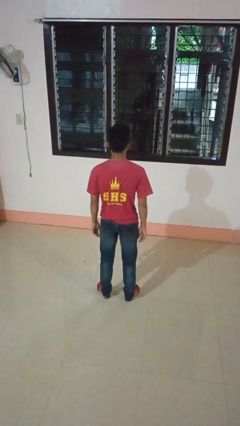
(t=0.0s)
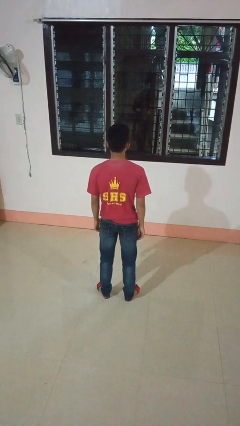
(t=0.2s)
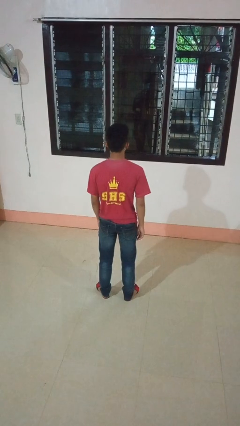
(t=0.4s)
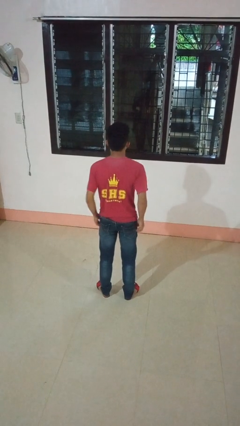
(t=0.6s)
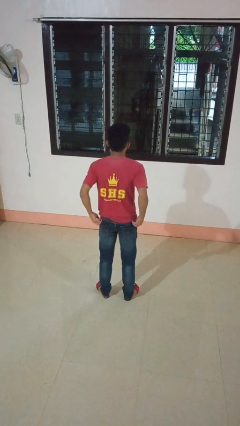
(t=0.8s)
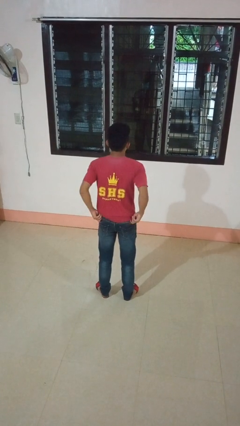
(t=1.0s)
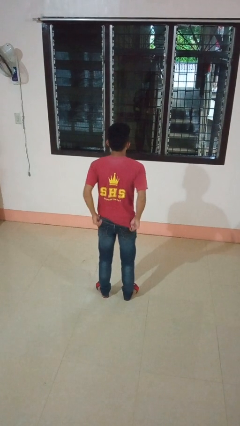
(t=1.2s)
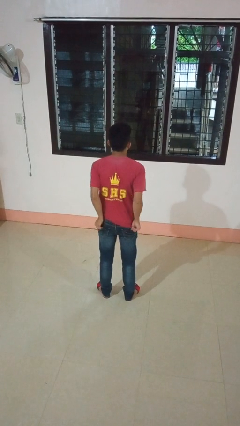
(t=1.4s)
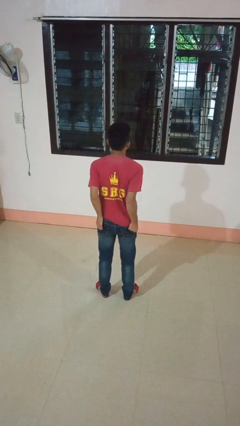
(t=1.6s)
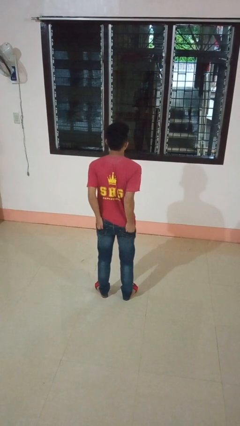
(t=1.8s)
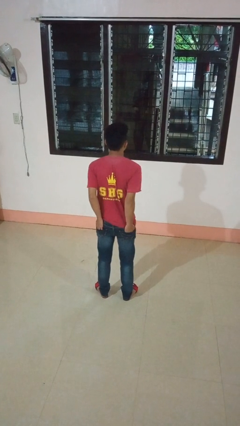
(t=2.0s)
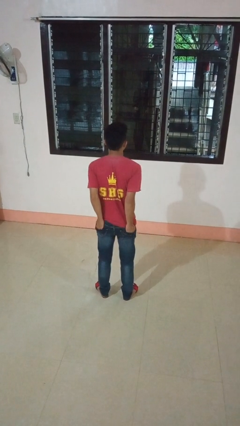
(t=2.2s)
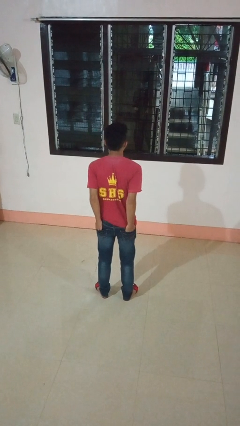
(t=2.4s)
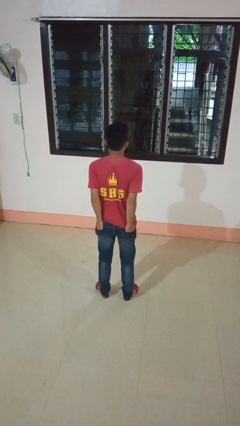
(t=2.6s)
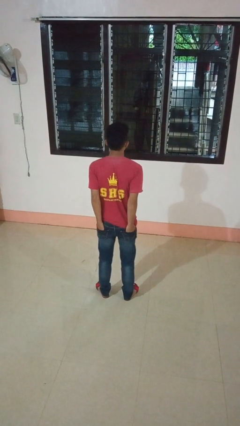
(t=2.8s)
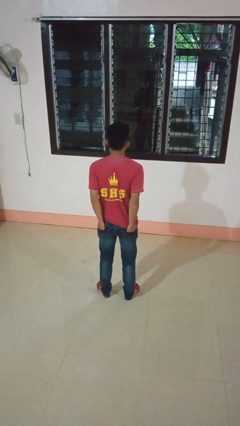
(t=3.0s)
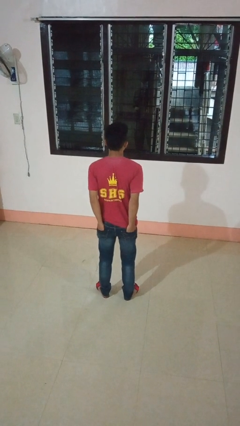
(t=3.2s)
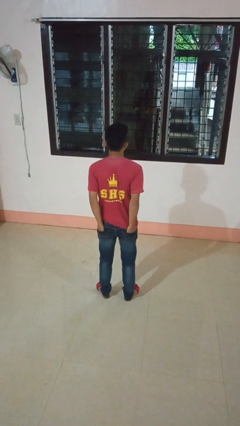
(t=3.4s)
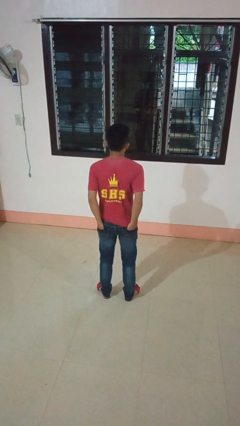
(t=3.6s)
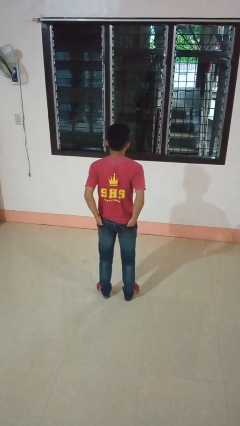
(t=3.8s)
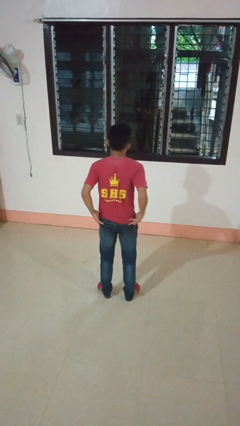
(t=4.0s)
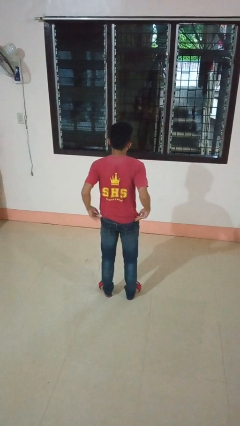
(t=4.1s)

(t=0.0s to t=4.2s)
person puts hands in back pockets

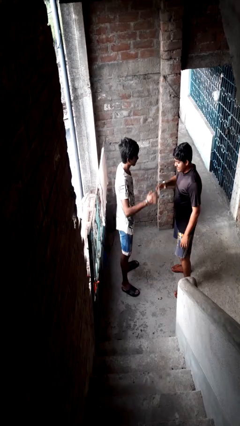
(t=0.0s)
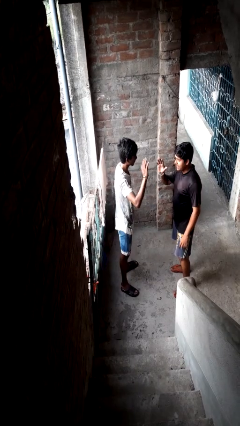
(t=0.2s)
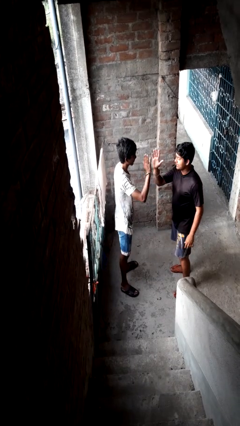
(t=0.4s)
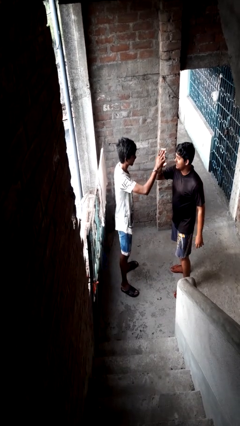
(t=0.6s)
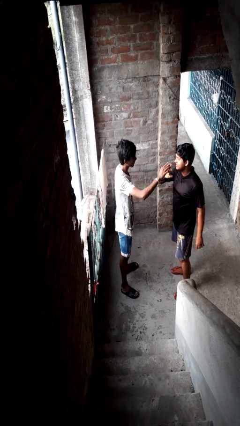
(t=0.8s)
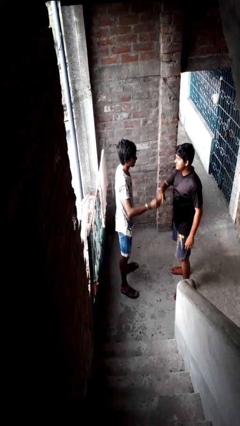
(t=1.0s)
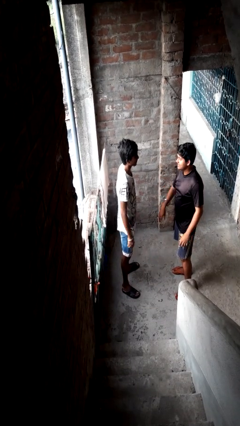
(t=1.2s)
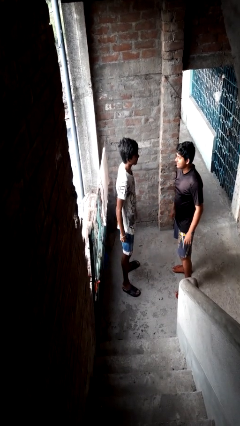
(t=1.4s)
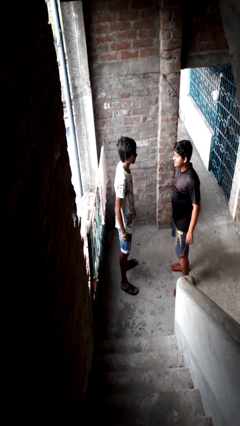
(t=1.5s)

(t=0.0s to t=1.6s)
person highfives hand

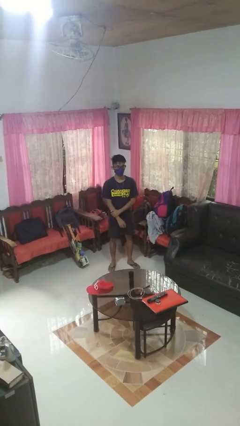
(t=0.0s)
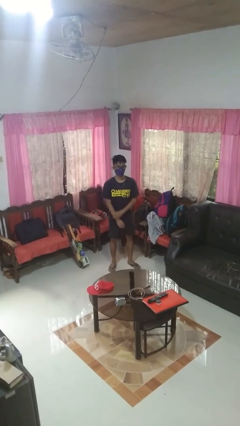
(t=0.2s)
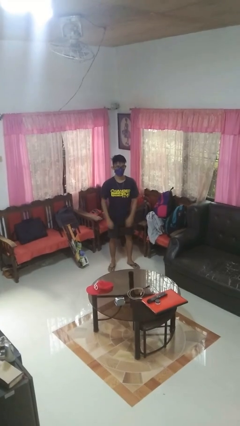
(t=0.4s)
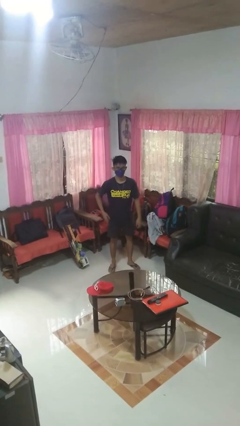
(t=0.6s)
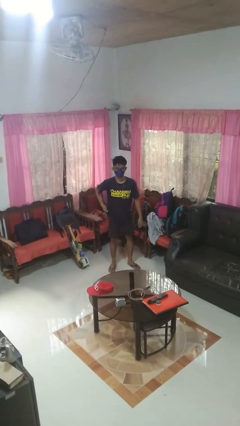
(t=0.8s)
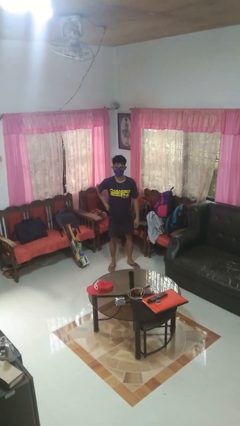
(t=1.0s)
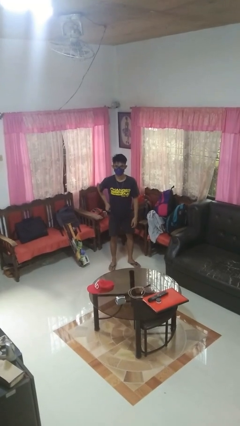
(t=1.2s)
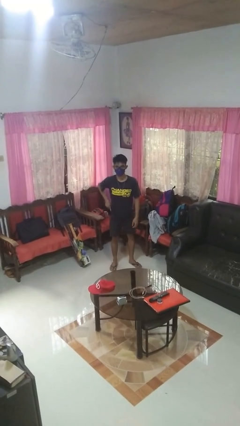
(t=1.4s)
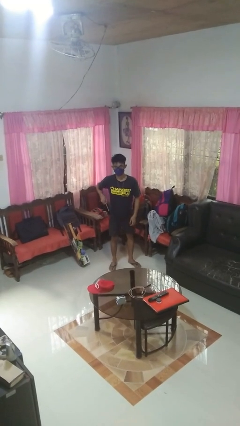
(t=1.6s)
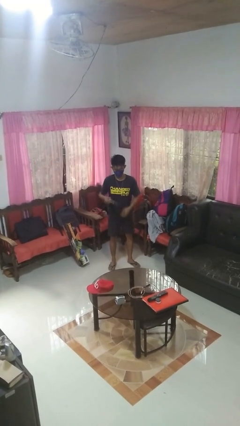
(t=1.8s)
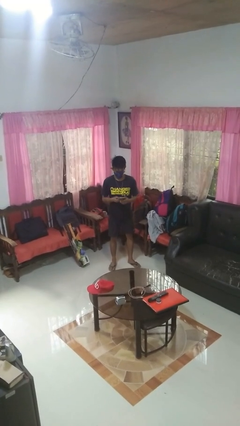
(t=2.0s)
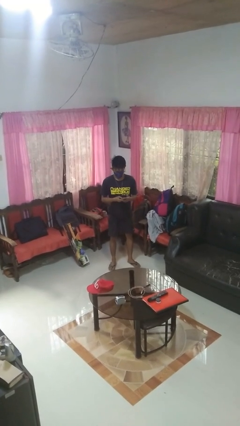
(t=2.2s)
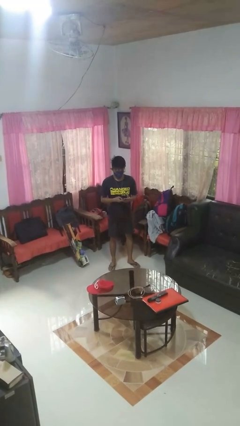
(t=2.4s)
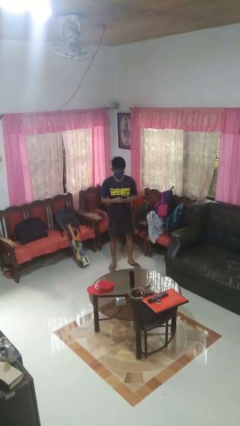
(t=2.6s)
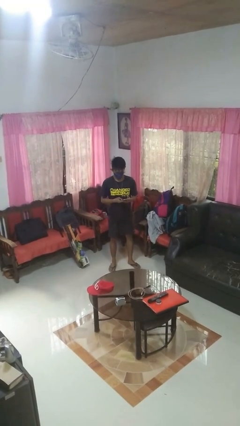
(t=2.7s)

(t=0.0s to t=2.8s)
person takes phone from pocket

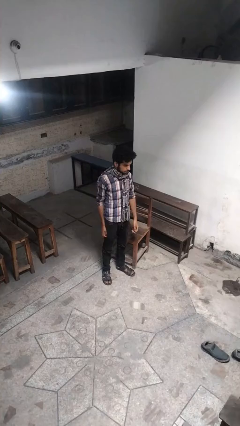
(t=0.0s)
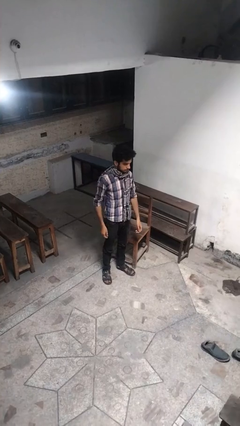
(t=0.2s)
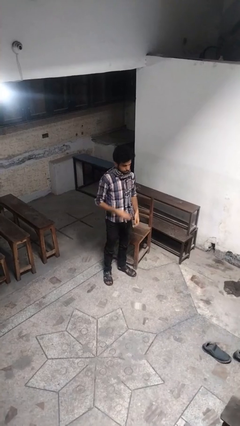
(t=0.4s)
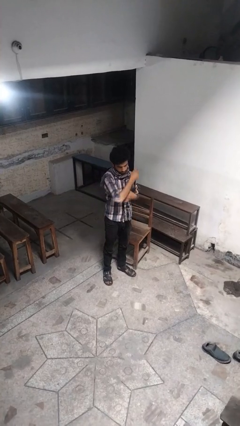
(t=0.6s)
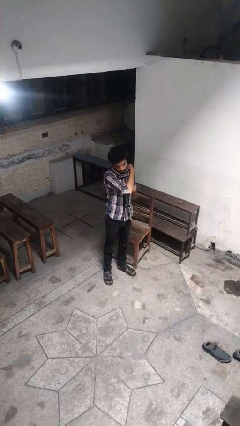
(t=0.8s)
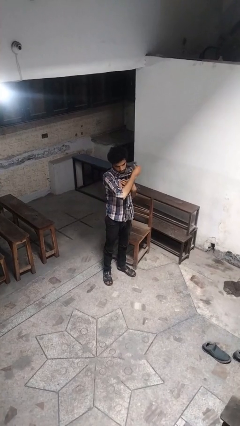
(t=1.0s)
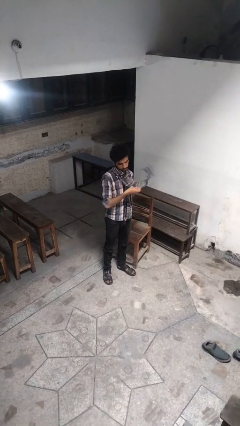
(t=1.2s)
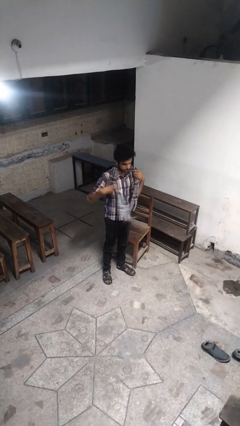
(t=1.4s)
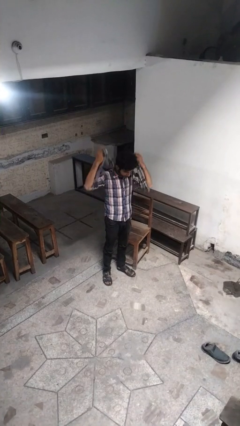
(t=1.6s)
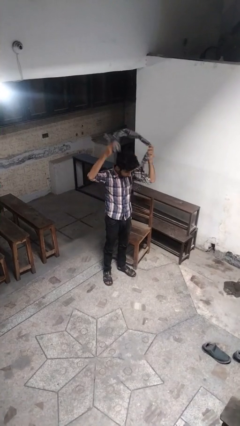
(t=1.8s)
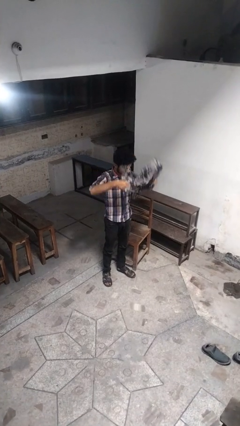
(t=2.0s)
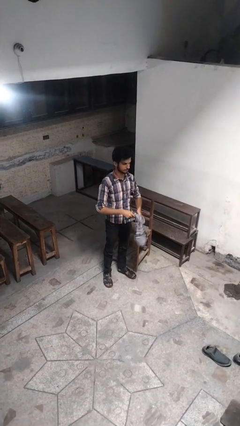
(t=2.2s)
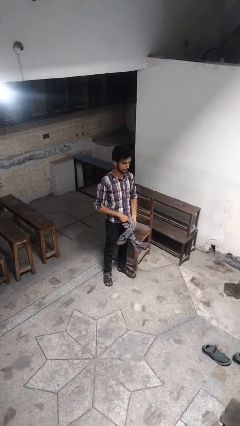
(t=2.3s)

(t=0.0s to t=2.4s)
person takes off scarf

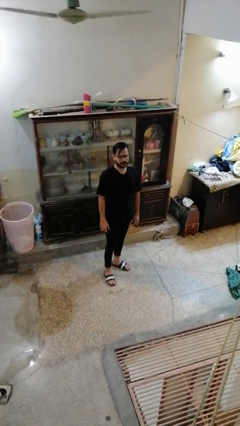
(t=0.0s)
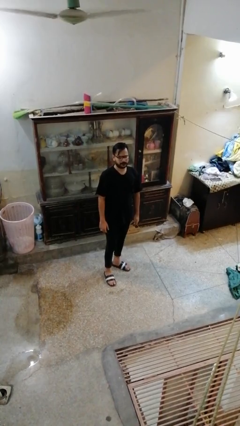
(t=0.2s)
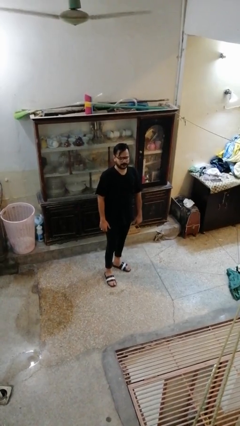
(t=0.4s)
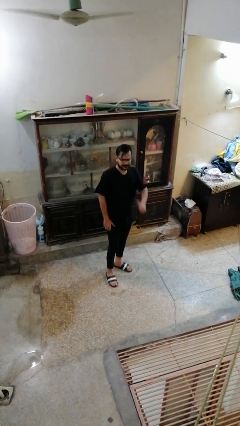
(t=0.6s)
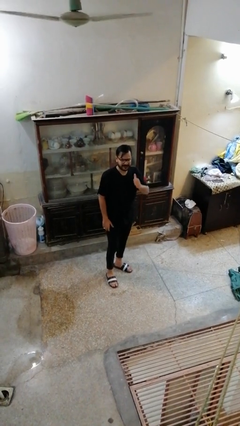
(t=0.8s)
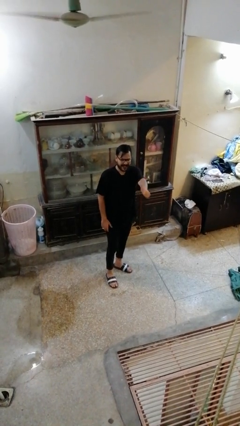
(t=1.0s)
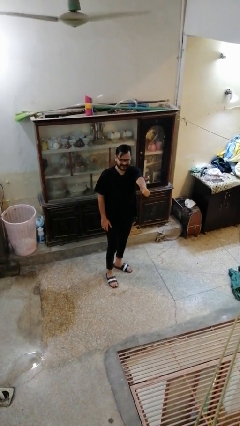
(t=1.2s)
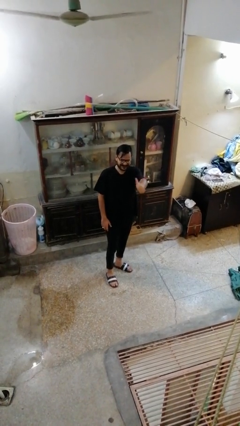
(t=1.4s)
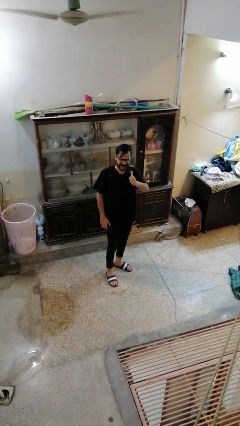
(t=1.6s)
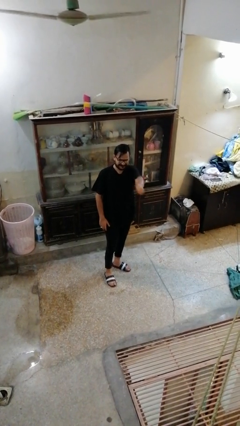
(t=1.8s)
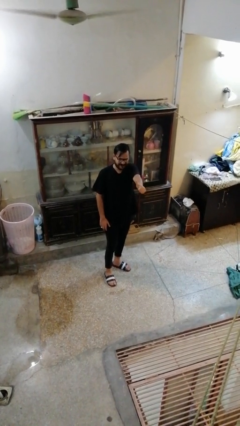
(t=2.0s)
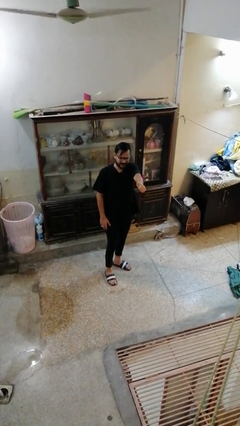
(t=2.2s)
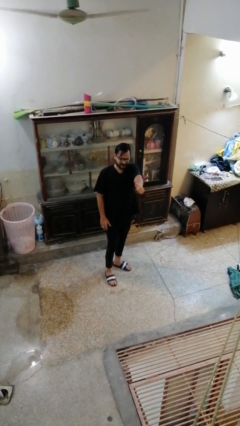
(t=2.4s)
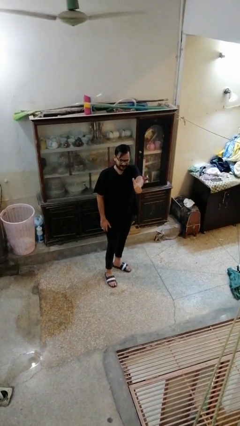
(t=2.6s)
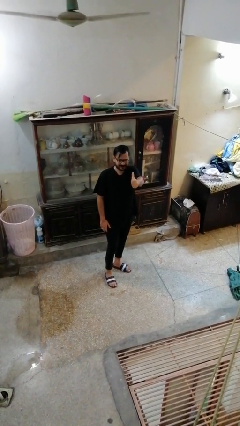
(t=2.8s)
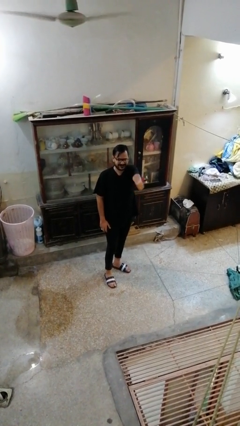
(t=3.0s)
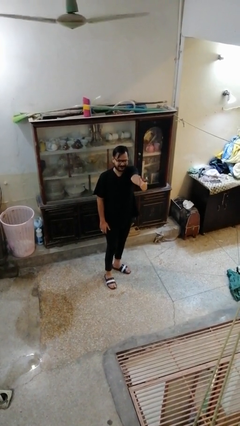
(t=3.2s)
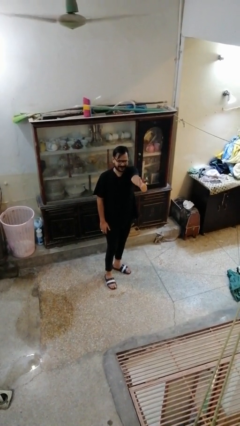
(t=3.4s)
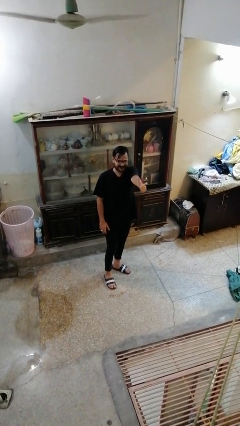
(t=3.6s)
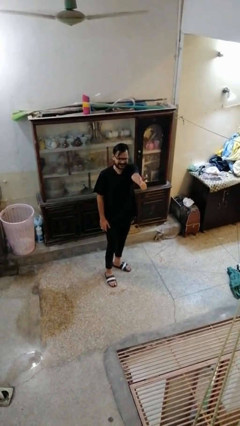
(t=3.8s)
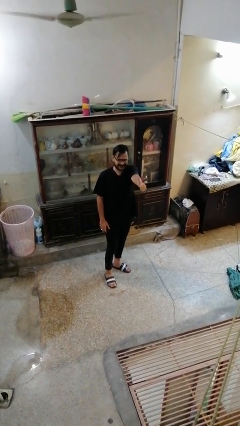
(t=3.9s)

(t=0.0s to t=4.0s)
person gestures thumbs up

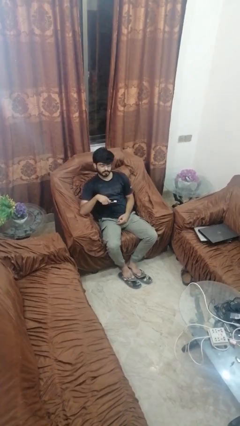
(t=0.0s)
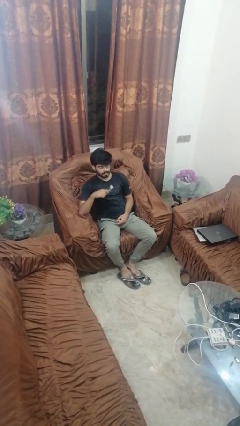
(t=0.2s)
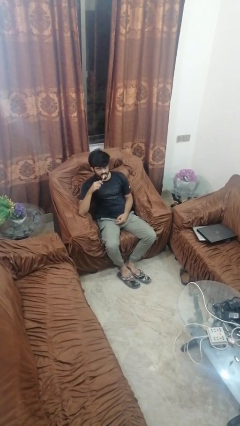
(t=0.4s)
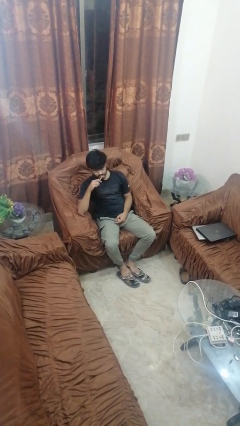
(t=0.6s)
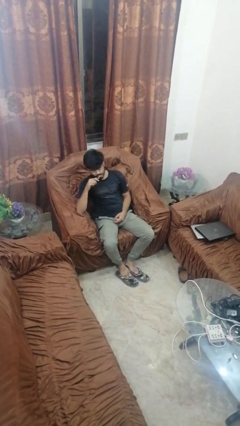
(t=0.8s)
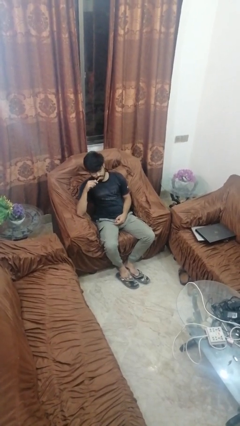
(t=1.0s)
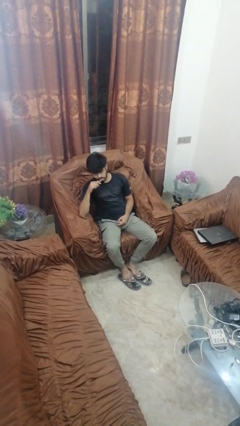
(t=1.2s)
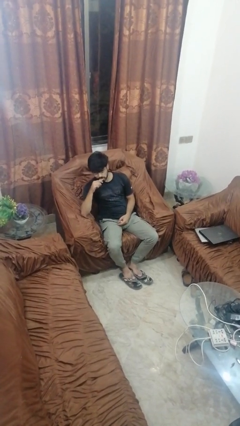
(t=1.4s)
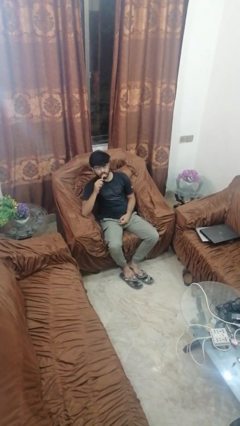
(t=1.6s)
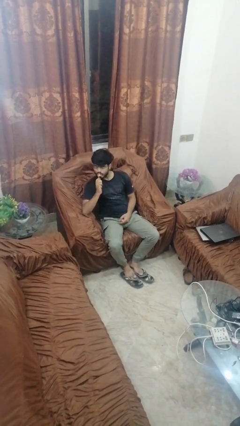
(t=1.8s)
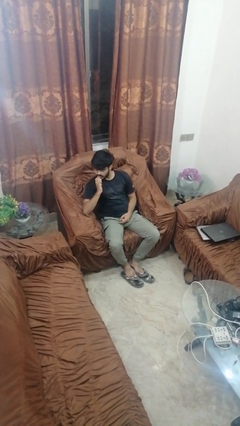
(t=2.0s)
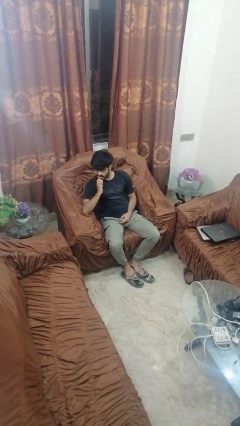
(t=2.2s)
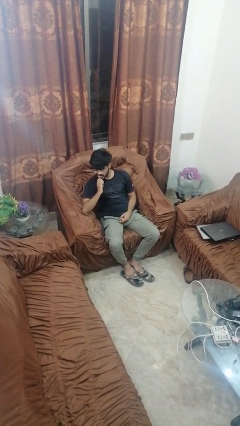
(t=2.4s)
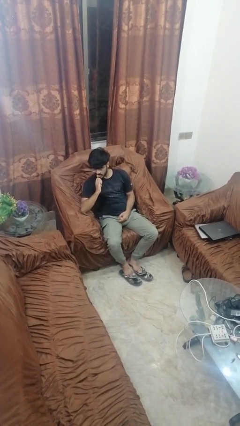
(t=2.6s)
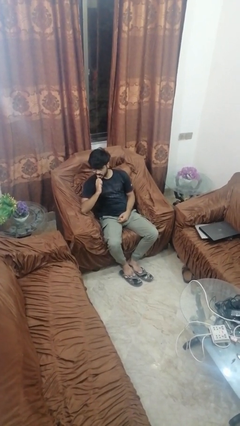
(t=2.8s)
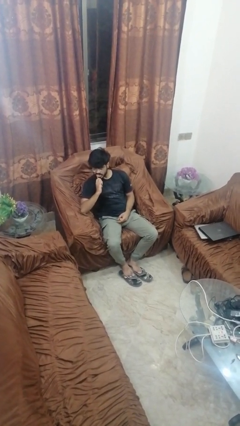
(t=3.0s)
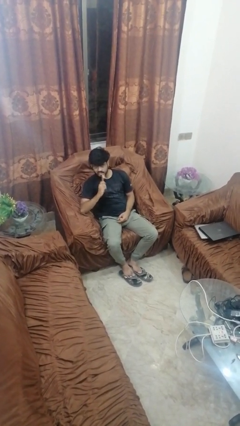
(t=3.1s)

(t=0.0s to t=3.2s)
person brushes teeth
